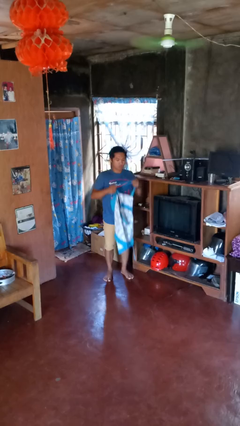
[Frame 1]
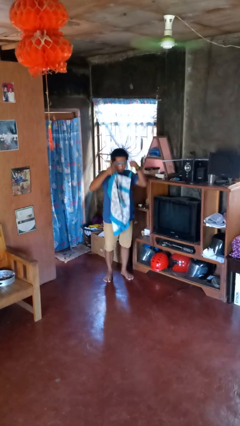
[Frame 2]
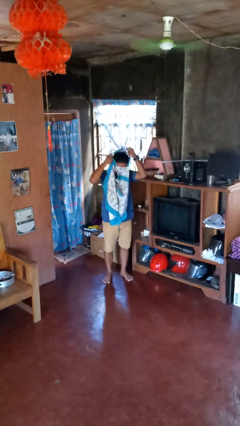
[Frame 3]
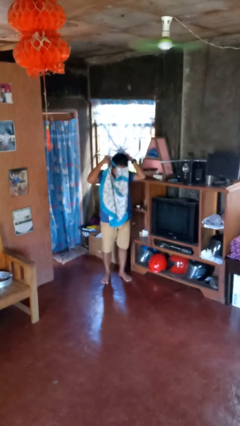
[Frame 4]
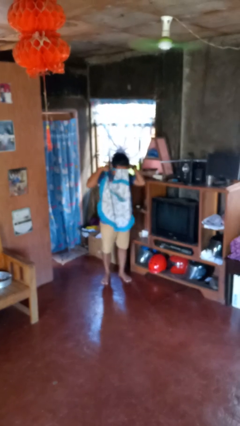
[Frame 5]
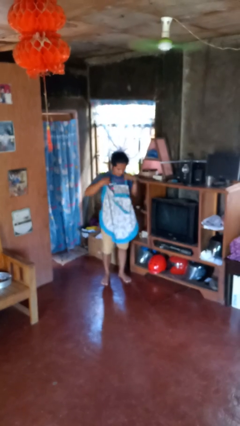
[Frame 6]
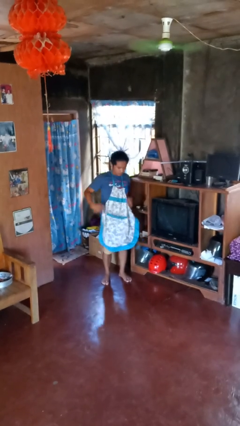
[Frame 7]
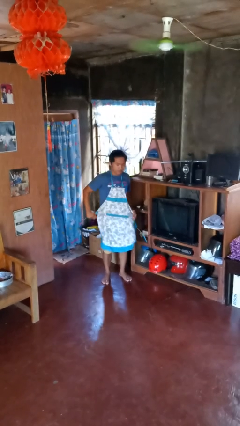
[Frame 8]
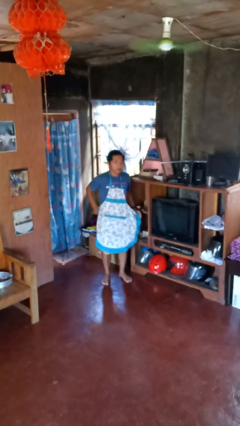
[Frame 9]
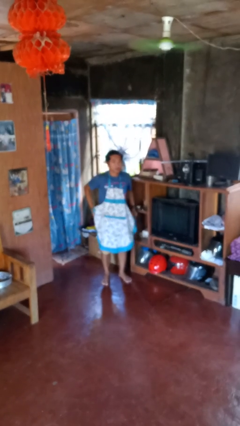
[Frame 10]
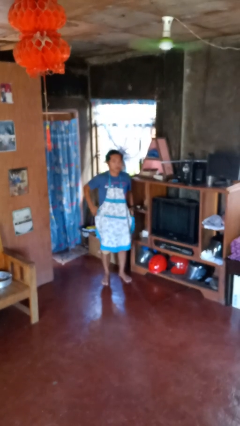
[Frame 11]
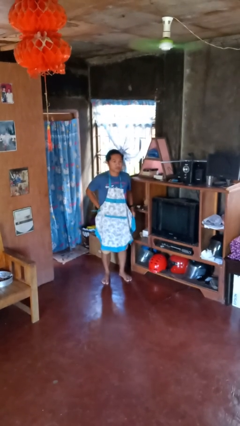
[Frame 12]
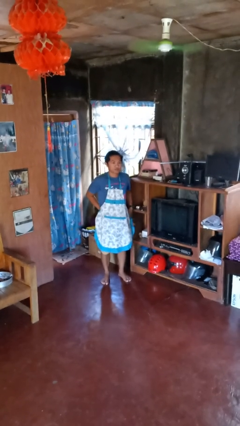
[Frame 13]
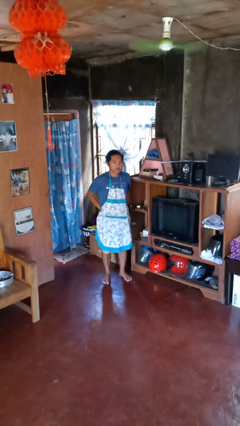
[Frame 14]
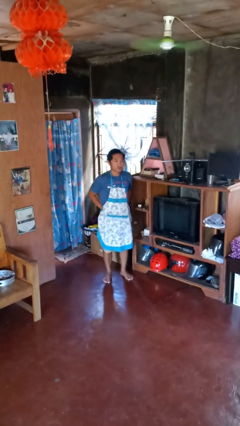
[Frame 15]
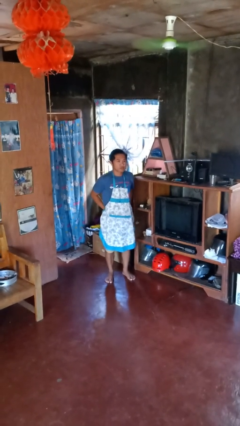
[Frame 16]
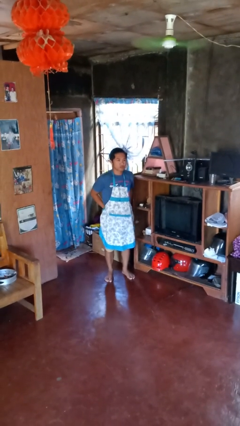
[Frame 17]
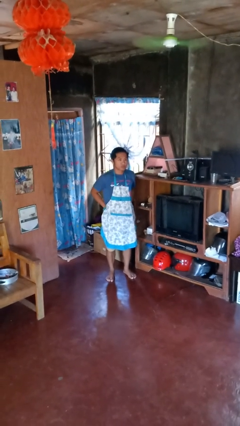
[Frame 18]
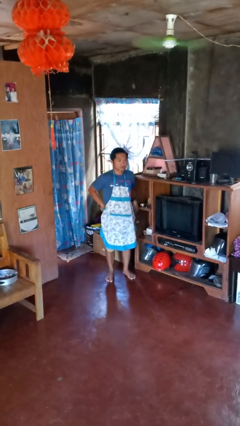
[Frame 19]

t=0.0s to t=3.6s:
person puts on apron

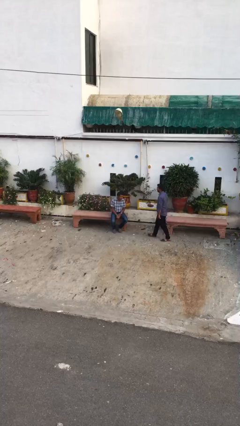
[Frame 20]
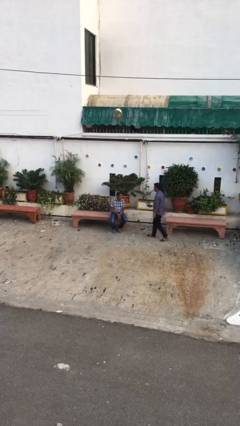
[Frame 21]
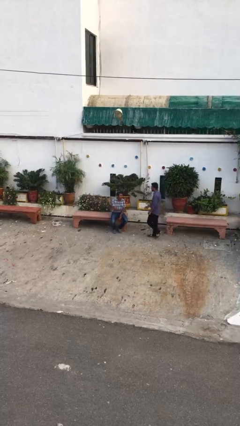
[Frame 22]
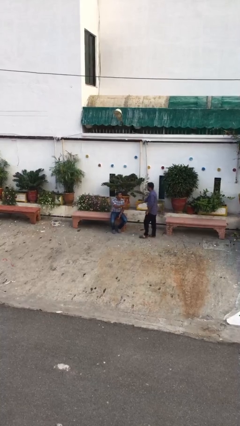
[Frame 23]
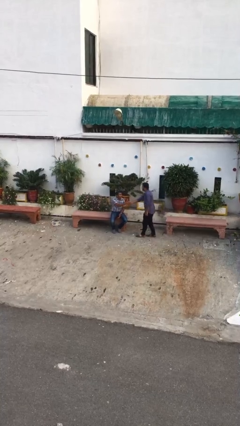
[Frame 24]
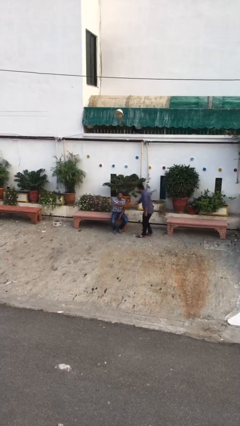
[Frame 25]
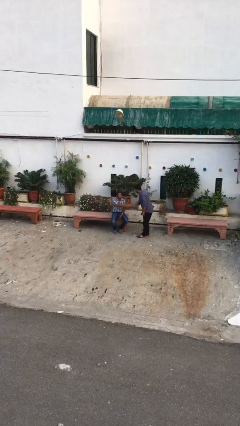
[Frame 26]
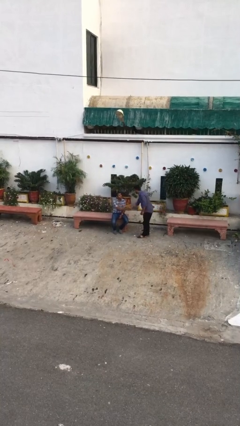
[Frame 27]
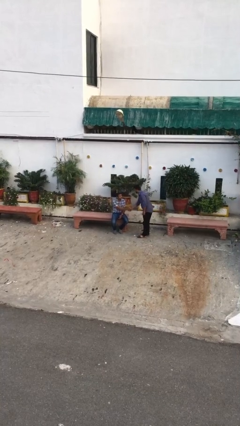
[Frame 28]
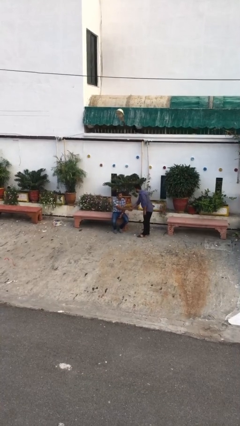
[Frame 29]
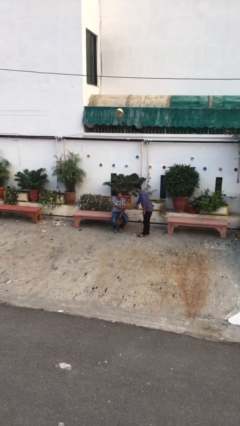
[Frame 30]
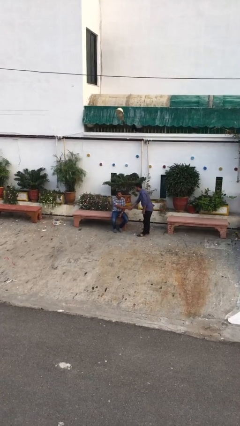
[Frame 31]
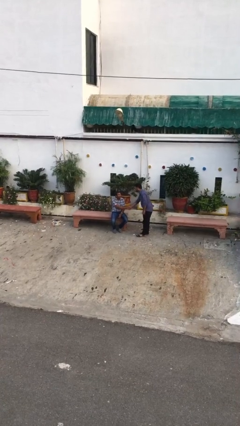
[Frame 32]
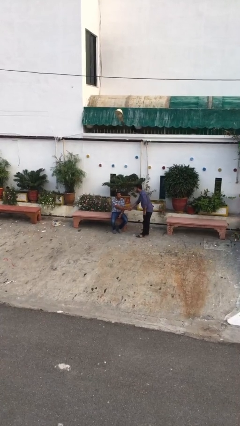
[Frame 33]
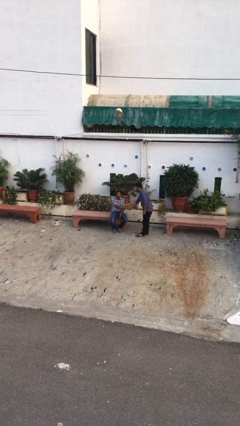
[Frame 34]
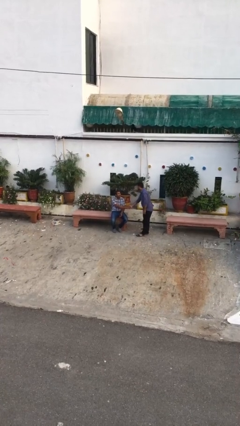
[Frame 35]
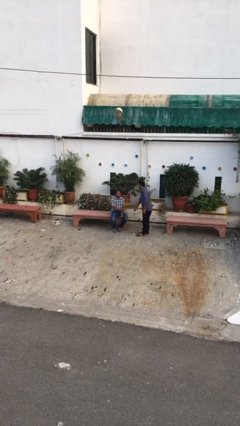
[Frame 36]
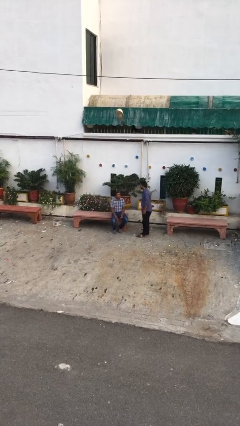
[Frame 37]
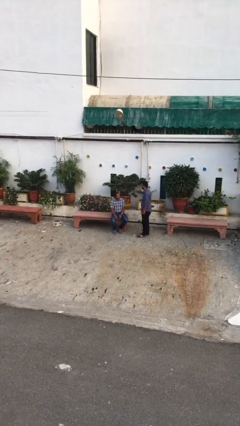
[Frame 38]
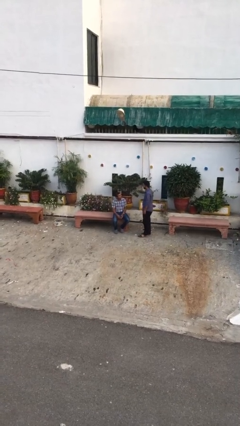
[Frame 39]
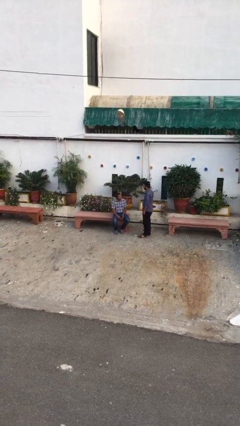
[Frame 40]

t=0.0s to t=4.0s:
person shakes hand

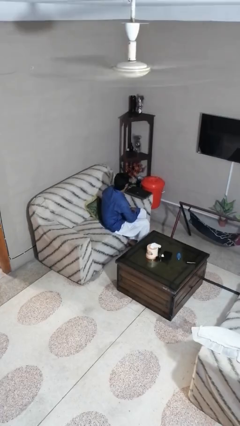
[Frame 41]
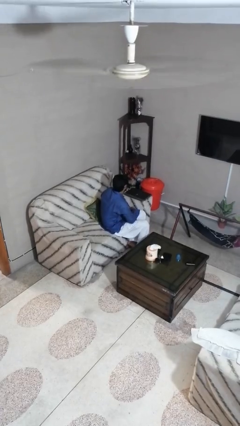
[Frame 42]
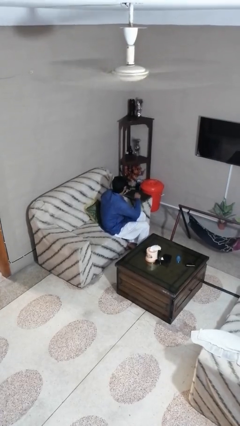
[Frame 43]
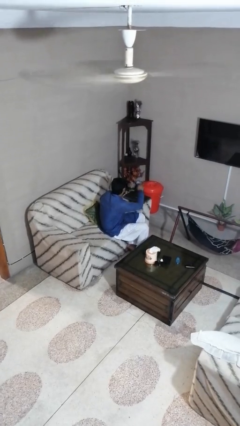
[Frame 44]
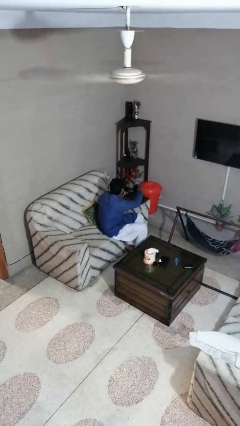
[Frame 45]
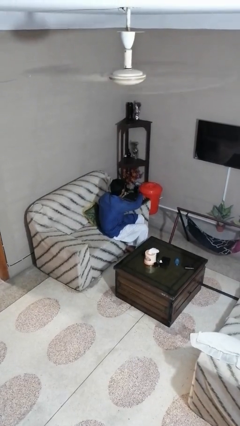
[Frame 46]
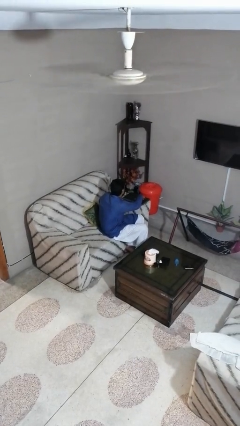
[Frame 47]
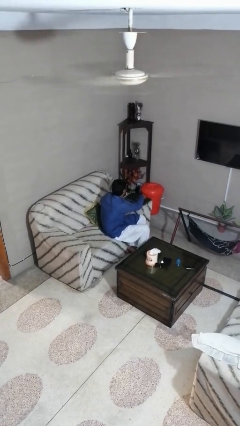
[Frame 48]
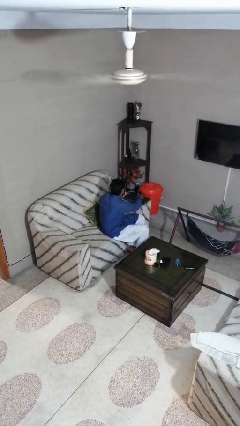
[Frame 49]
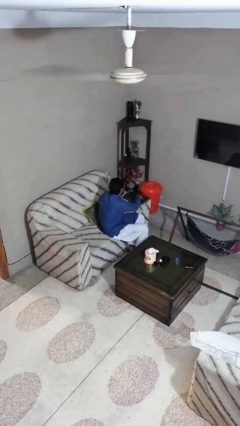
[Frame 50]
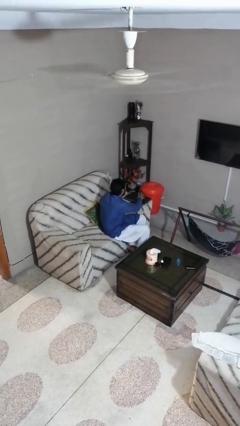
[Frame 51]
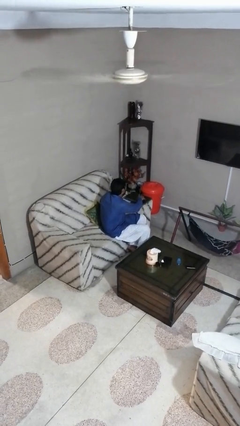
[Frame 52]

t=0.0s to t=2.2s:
person taps object with finger

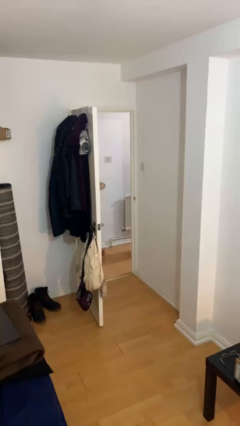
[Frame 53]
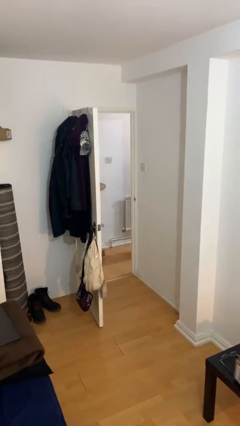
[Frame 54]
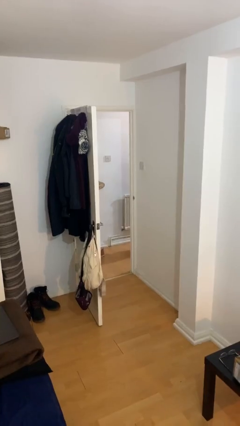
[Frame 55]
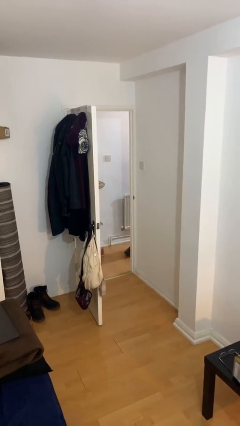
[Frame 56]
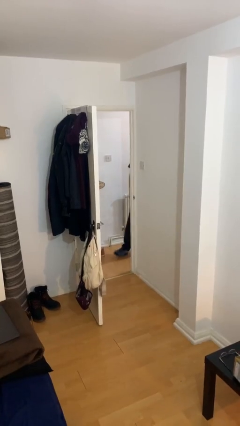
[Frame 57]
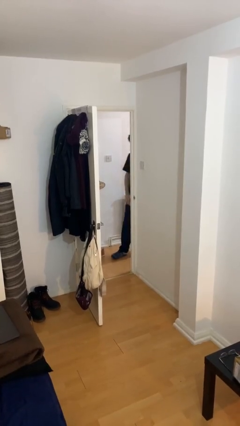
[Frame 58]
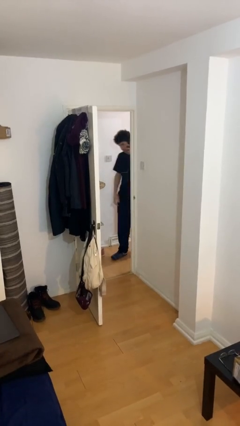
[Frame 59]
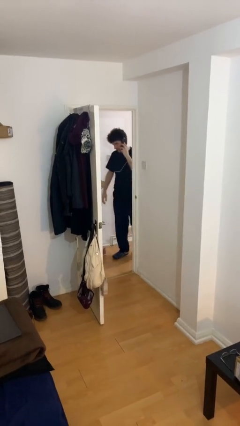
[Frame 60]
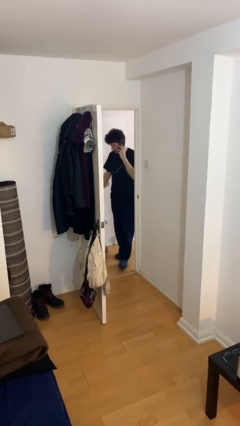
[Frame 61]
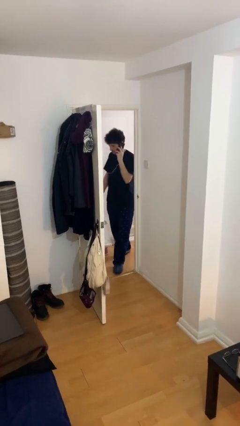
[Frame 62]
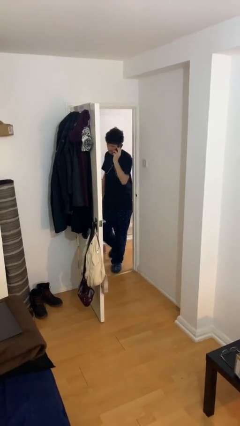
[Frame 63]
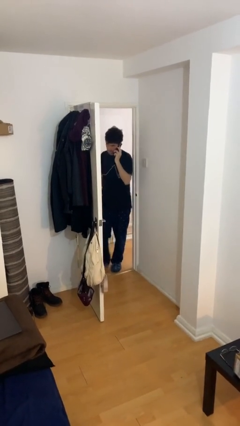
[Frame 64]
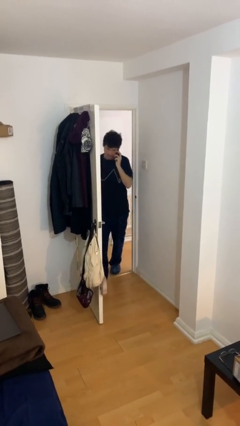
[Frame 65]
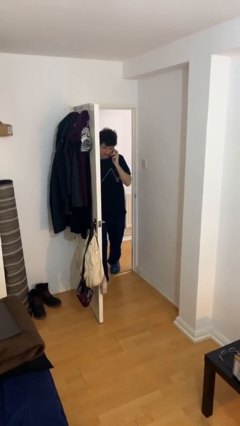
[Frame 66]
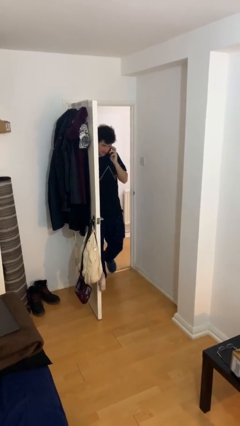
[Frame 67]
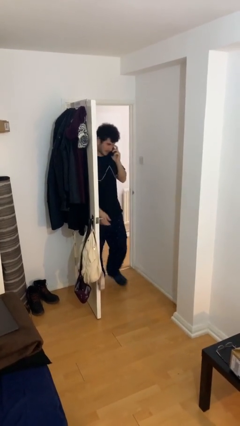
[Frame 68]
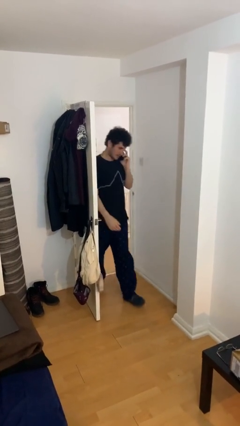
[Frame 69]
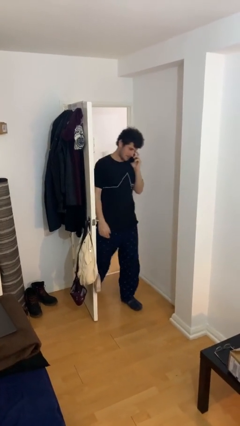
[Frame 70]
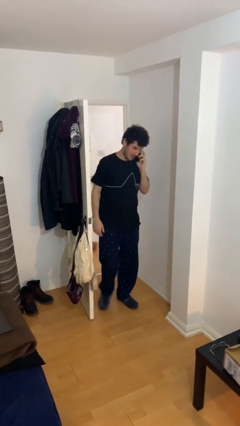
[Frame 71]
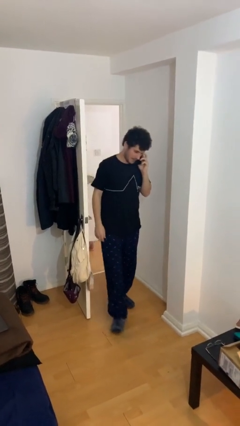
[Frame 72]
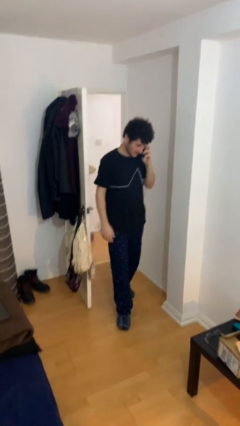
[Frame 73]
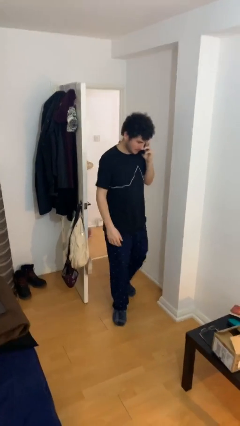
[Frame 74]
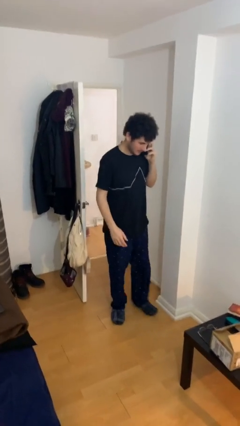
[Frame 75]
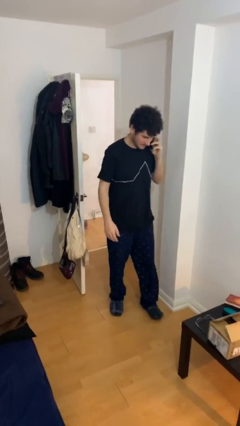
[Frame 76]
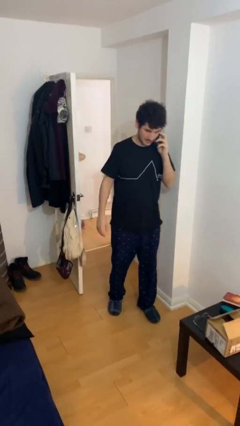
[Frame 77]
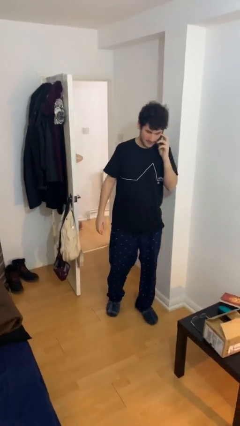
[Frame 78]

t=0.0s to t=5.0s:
person enters scene through structure

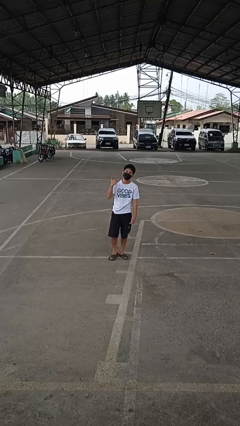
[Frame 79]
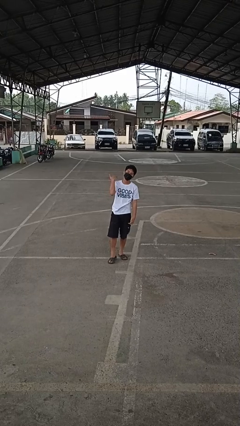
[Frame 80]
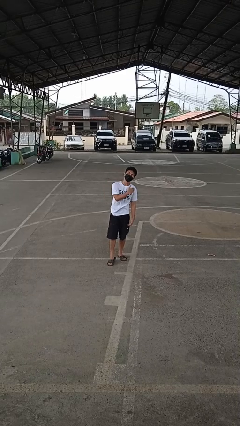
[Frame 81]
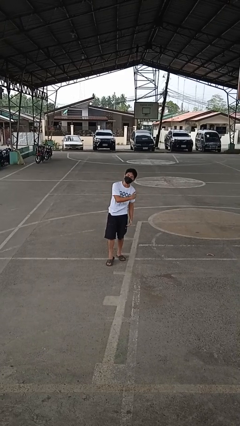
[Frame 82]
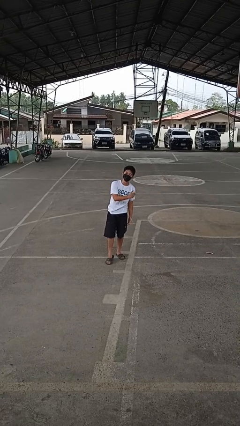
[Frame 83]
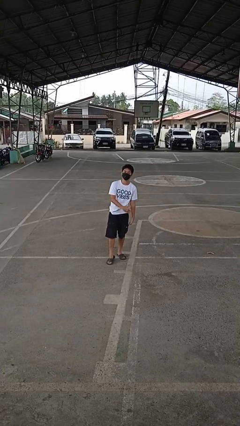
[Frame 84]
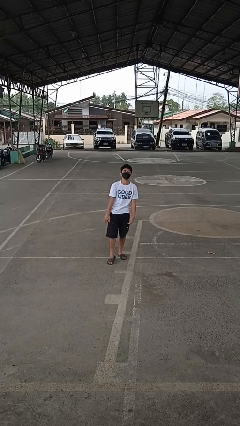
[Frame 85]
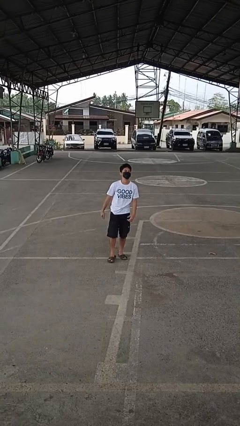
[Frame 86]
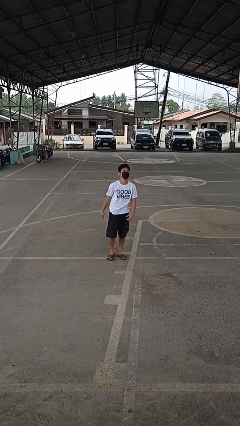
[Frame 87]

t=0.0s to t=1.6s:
person gestures cut

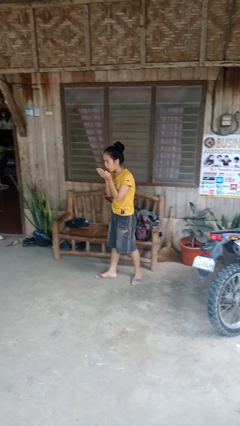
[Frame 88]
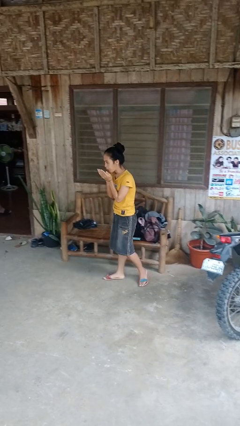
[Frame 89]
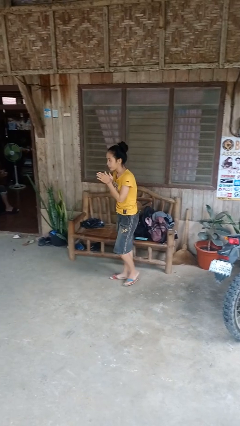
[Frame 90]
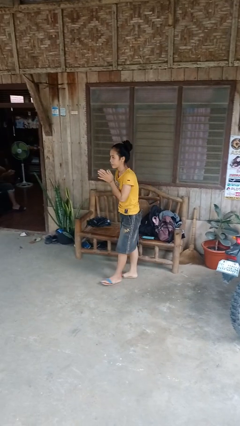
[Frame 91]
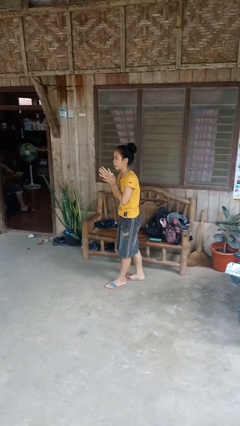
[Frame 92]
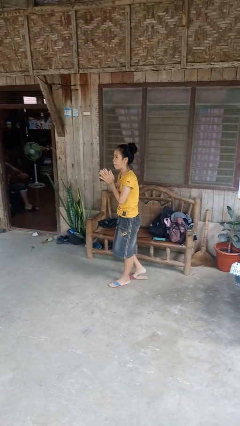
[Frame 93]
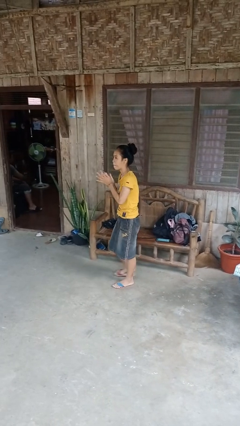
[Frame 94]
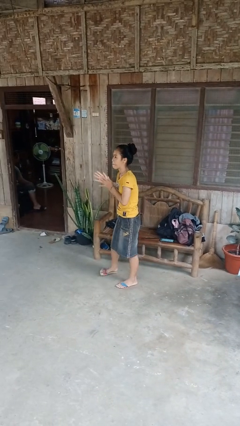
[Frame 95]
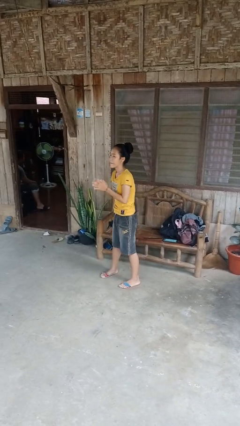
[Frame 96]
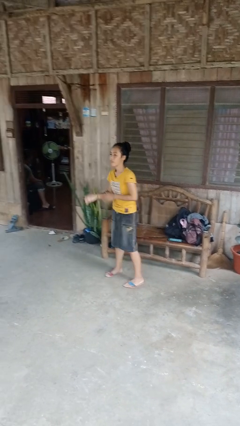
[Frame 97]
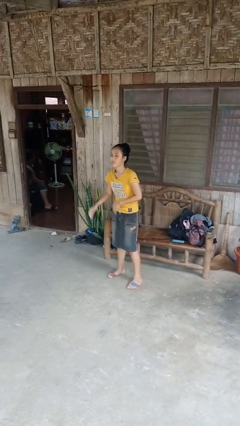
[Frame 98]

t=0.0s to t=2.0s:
person blows into hands
